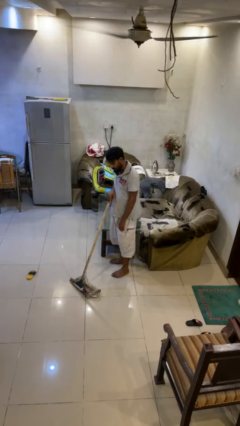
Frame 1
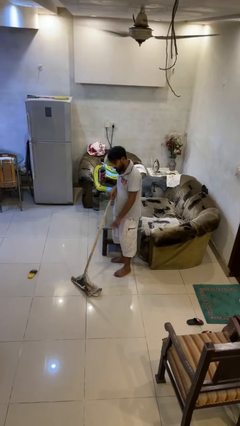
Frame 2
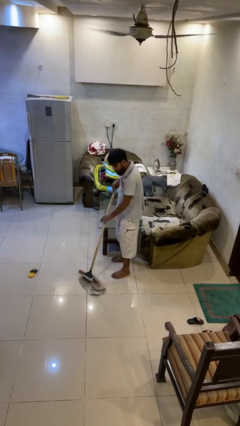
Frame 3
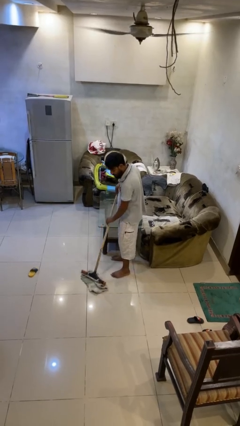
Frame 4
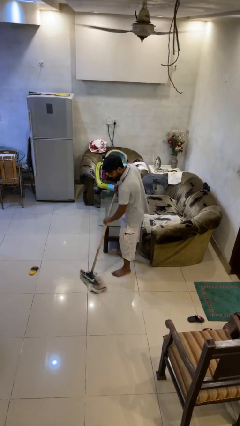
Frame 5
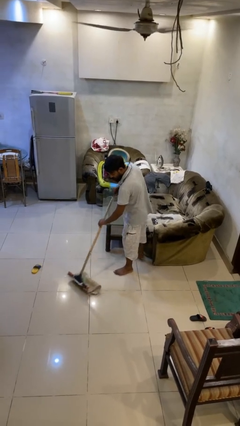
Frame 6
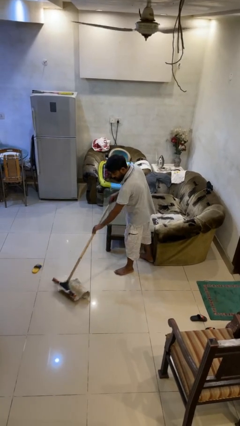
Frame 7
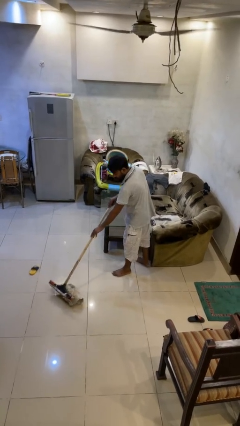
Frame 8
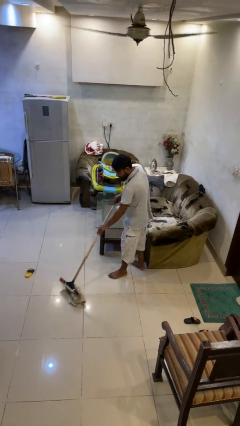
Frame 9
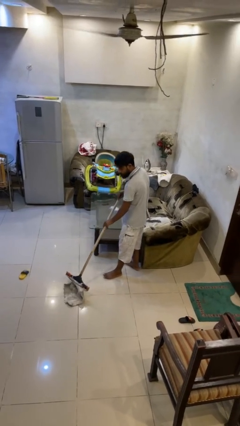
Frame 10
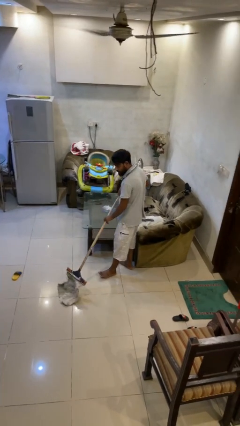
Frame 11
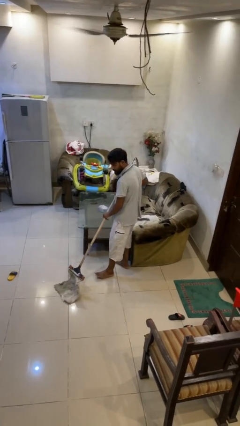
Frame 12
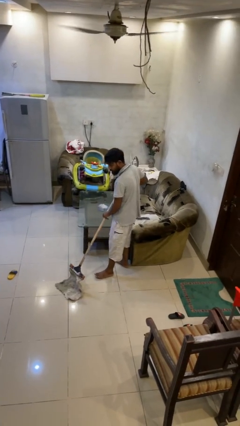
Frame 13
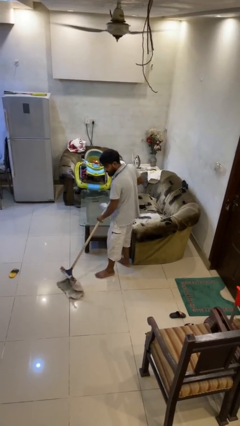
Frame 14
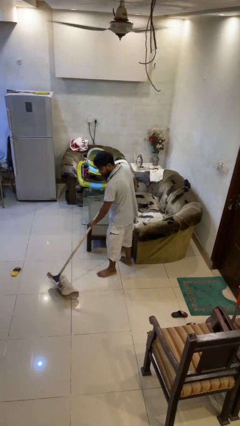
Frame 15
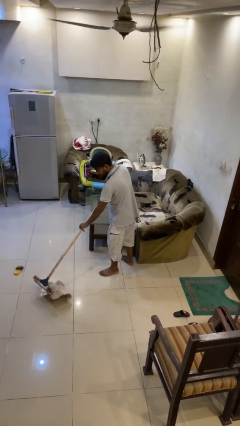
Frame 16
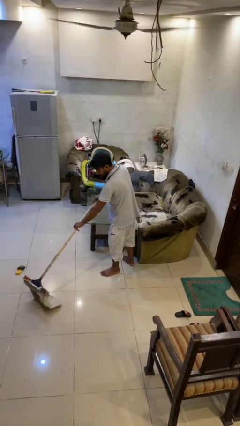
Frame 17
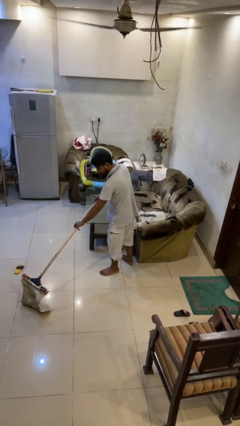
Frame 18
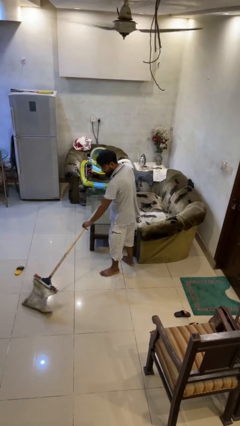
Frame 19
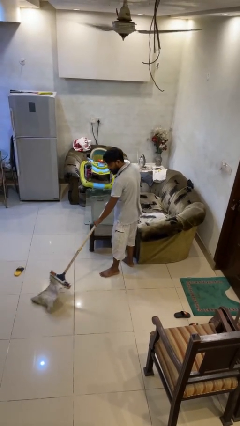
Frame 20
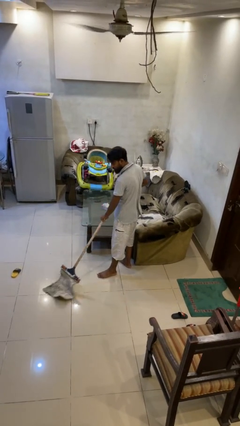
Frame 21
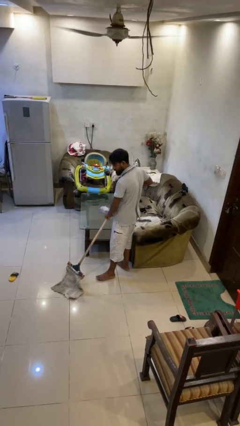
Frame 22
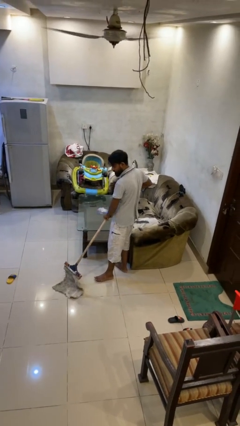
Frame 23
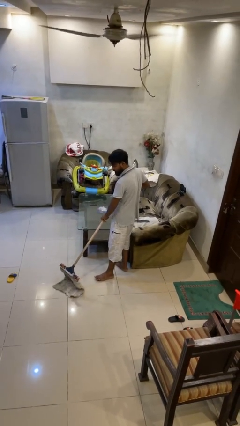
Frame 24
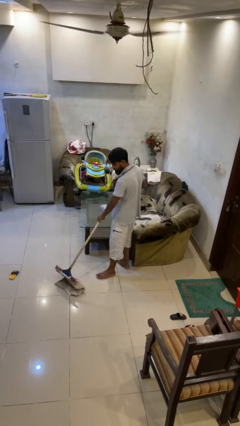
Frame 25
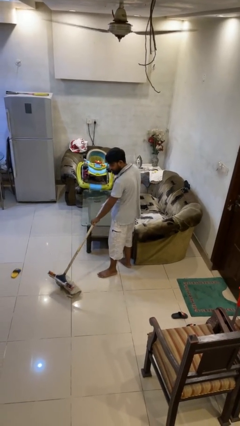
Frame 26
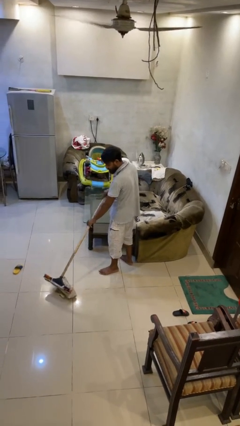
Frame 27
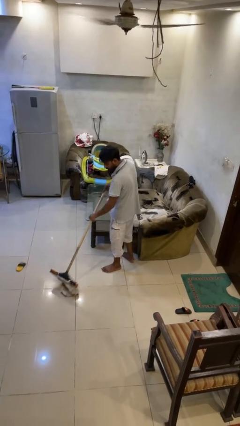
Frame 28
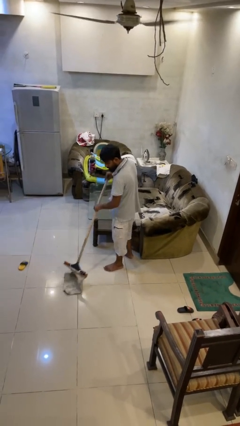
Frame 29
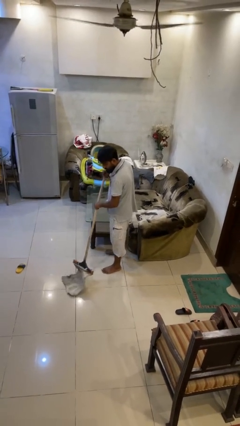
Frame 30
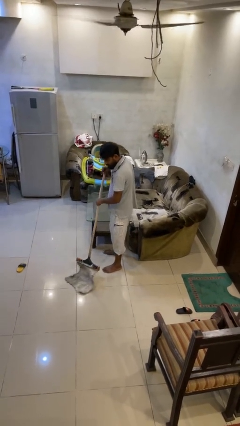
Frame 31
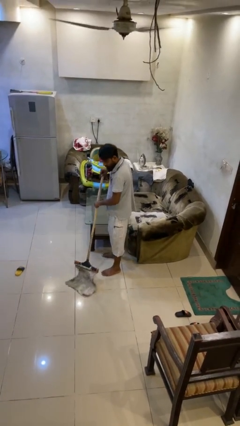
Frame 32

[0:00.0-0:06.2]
person mops

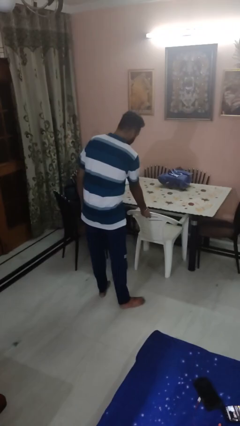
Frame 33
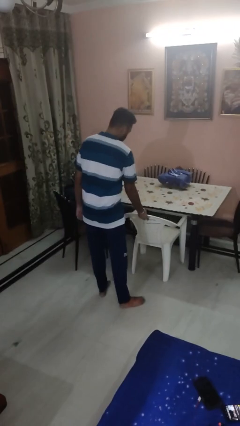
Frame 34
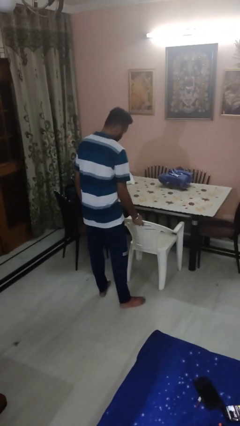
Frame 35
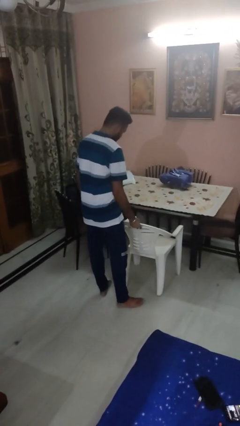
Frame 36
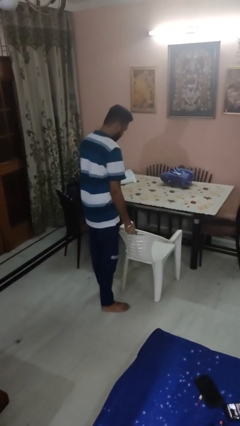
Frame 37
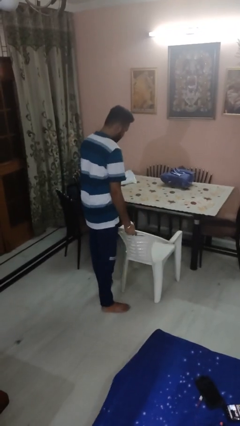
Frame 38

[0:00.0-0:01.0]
person pulls out chair

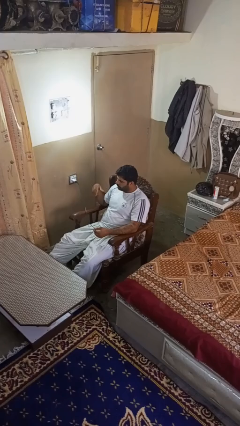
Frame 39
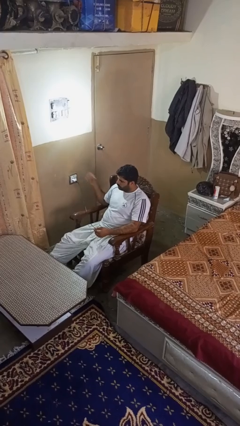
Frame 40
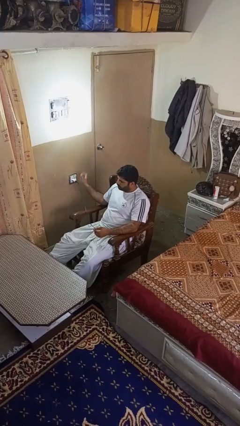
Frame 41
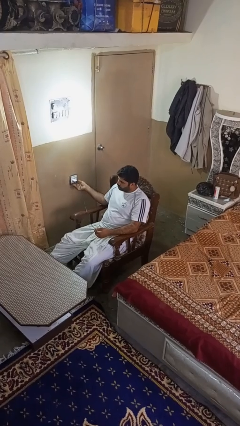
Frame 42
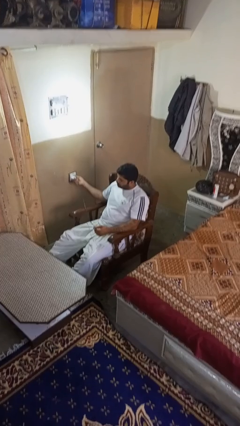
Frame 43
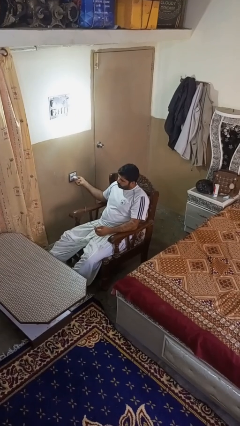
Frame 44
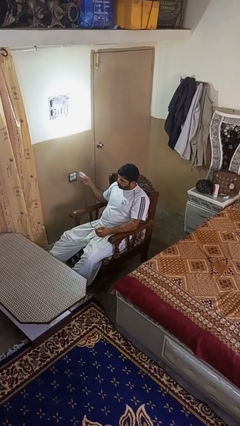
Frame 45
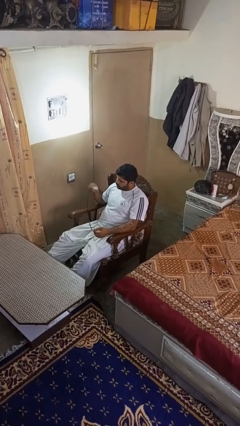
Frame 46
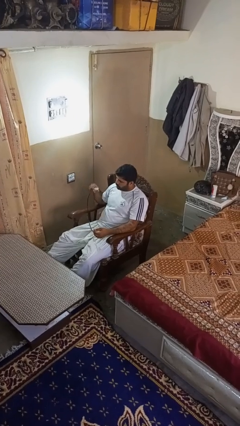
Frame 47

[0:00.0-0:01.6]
person unplugs from electrical socket

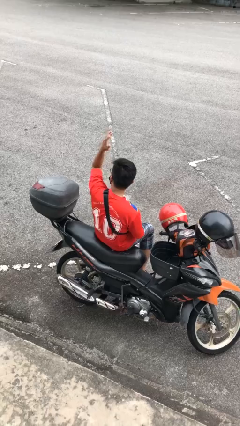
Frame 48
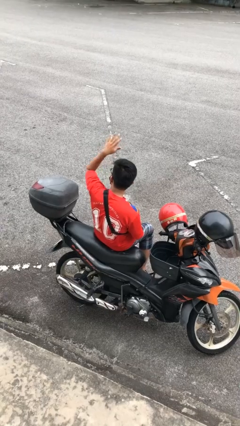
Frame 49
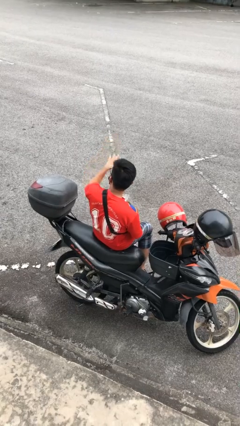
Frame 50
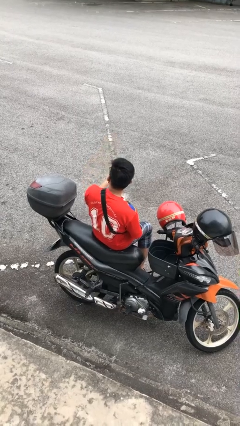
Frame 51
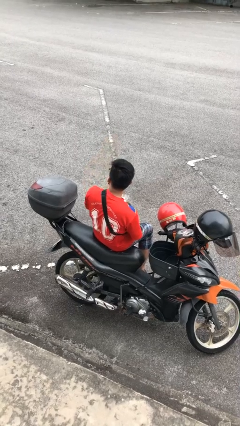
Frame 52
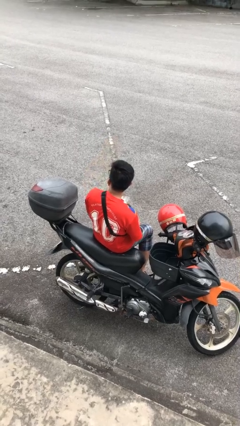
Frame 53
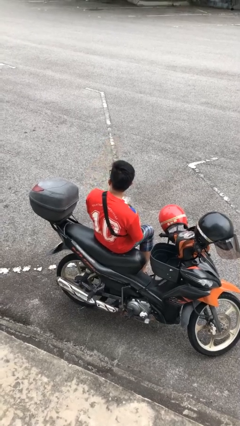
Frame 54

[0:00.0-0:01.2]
person gestures swipe down

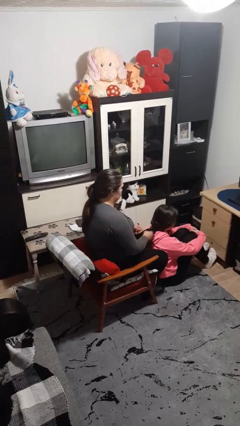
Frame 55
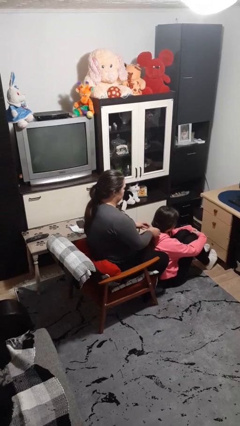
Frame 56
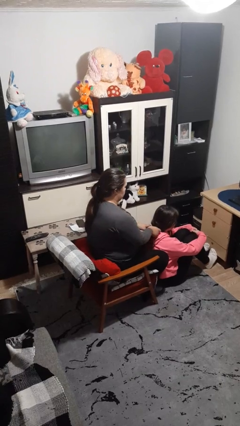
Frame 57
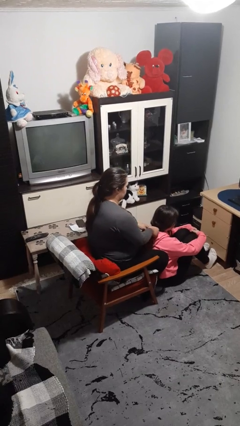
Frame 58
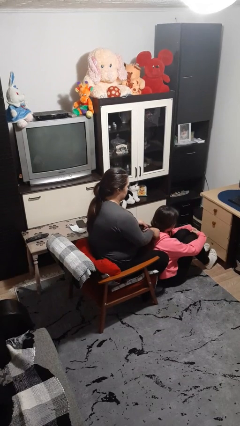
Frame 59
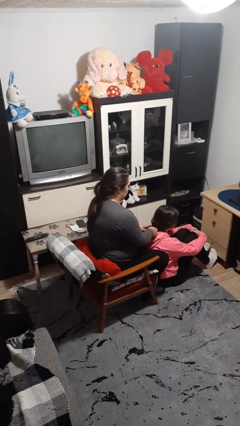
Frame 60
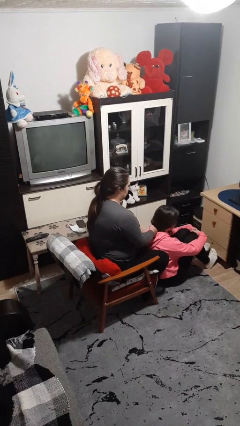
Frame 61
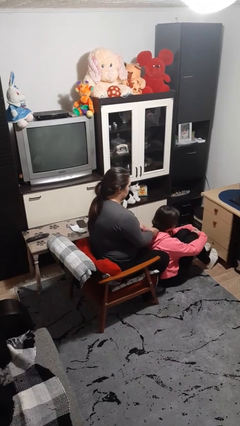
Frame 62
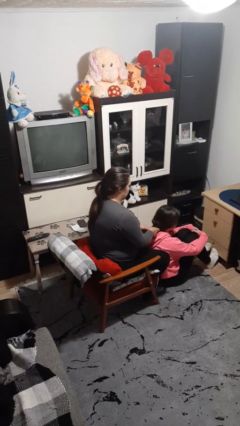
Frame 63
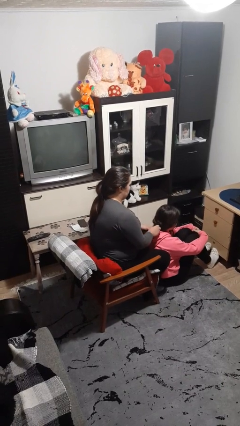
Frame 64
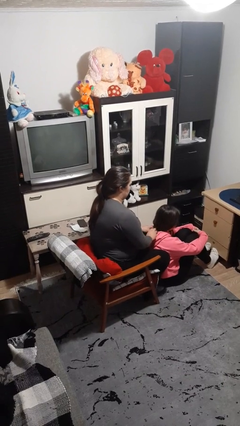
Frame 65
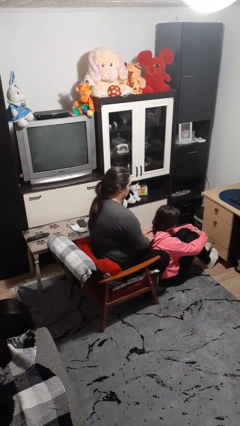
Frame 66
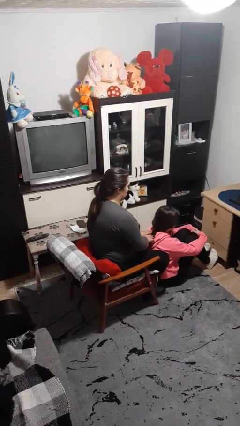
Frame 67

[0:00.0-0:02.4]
person braids hair of person

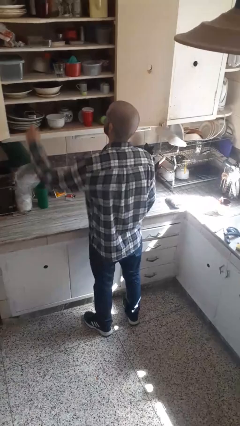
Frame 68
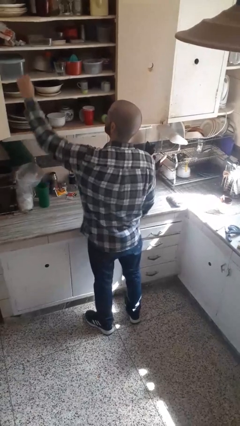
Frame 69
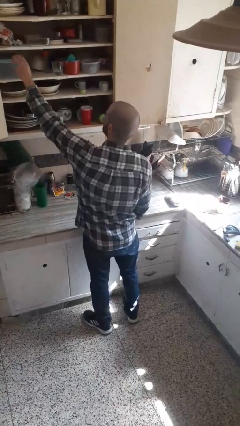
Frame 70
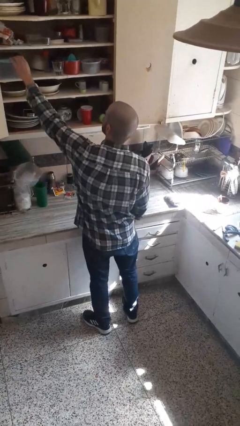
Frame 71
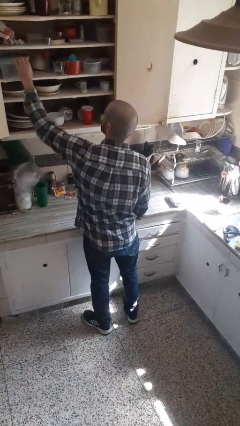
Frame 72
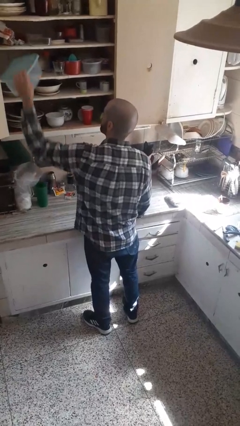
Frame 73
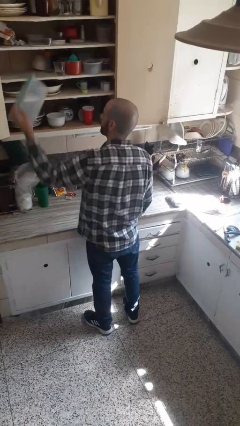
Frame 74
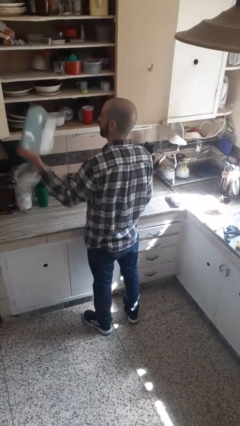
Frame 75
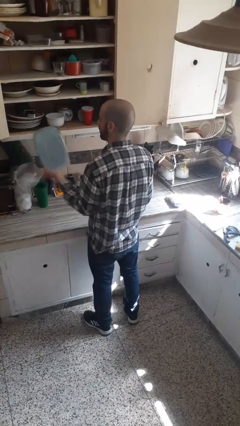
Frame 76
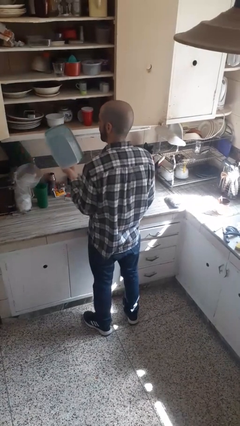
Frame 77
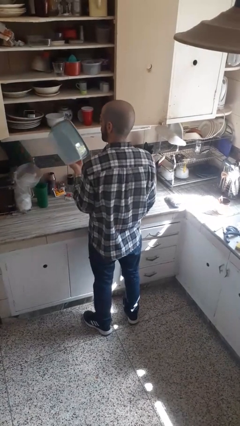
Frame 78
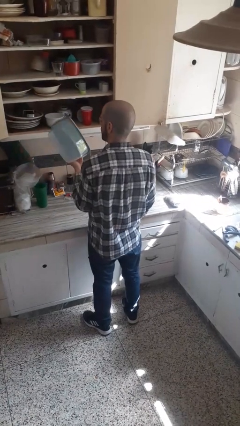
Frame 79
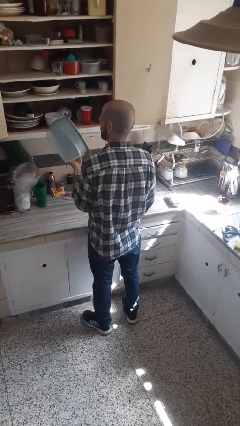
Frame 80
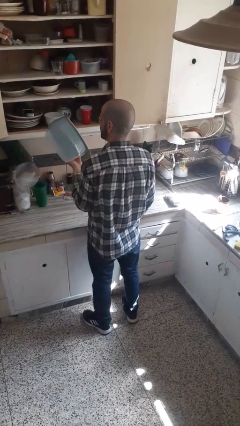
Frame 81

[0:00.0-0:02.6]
person picks up object from cabinet

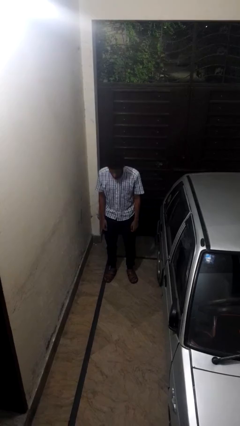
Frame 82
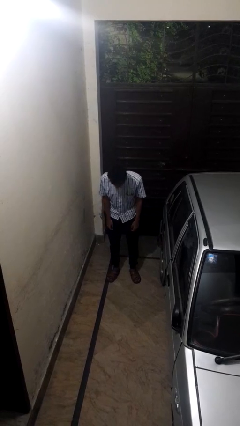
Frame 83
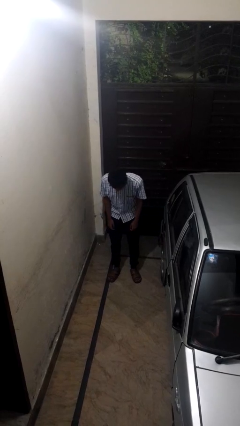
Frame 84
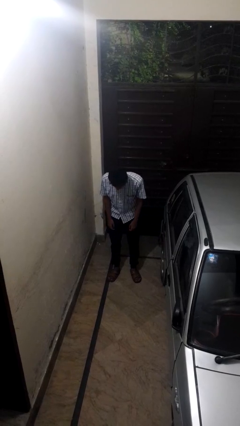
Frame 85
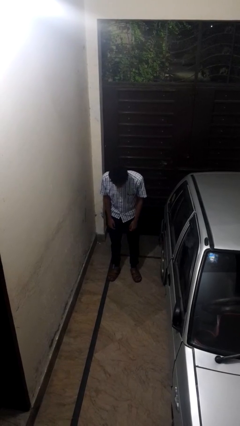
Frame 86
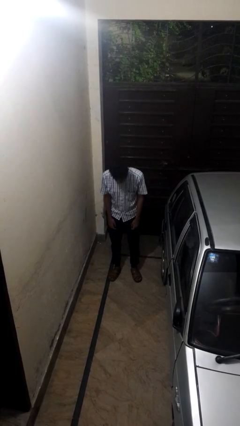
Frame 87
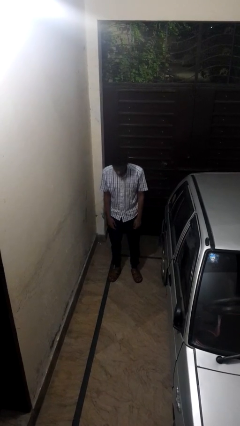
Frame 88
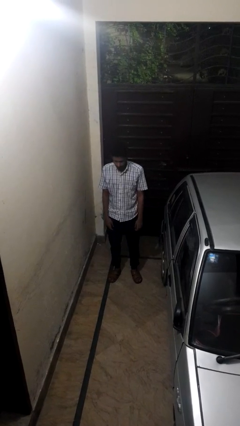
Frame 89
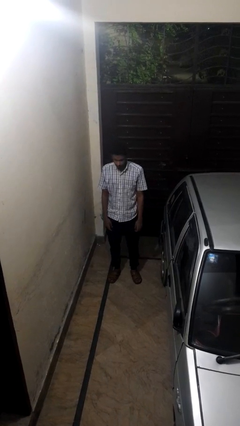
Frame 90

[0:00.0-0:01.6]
person bows

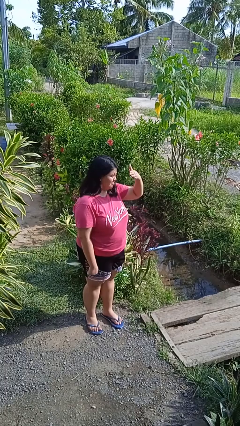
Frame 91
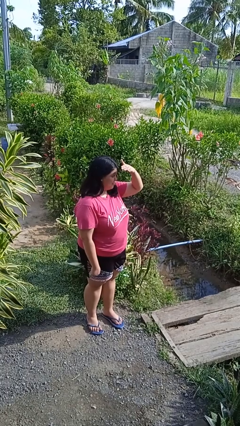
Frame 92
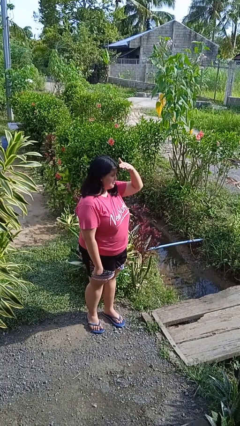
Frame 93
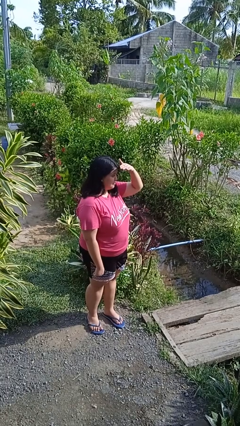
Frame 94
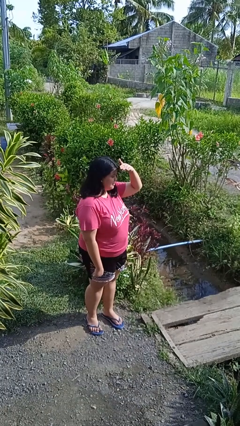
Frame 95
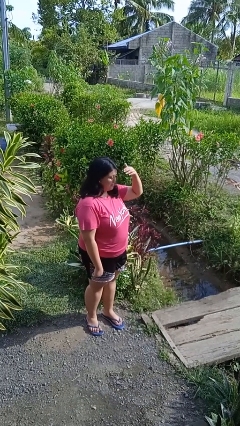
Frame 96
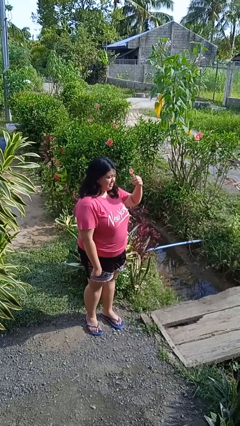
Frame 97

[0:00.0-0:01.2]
person shades eyes
